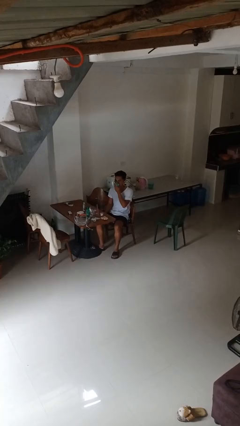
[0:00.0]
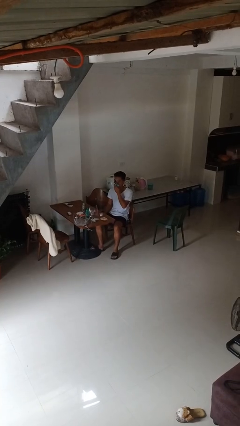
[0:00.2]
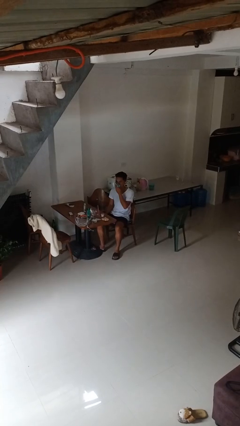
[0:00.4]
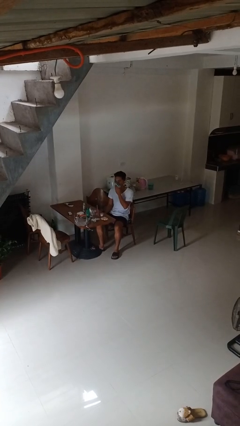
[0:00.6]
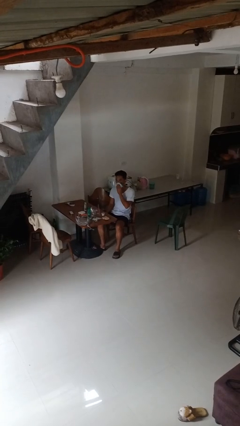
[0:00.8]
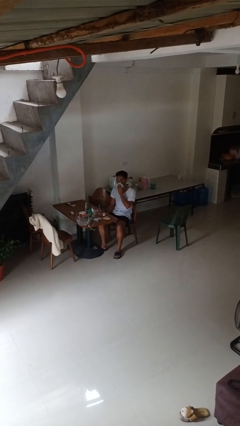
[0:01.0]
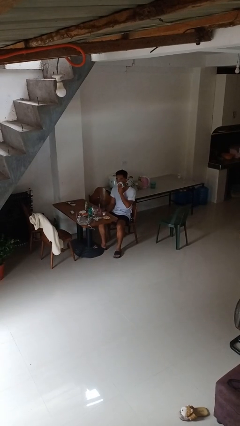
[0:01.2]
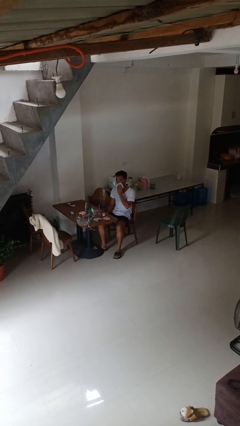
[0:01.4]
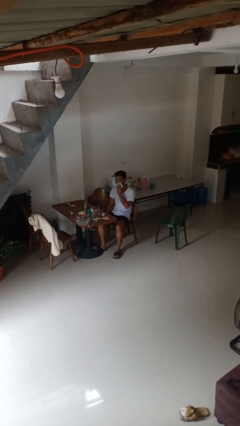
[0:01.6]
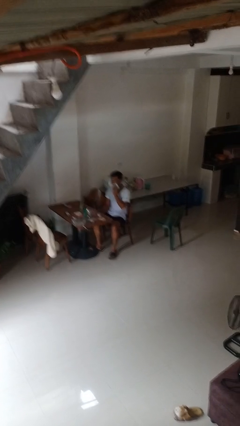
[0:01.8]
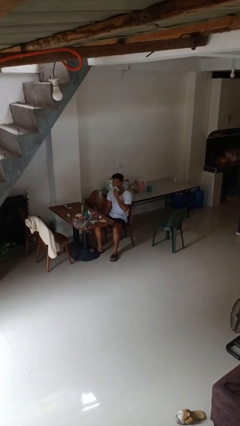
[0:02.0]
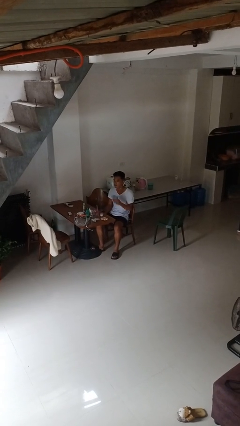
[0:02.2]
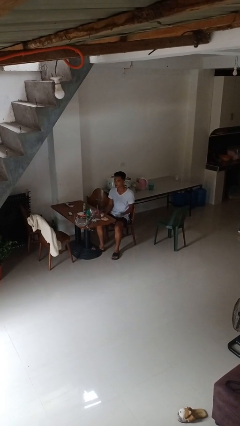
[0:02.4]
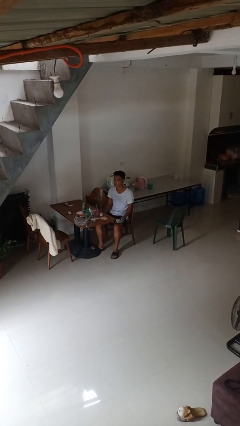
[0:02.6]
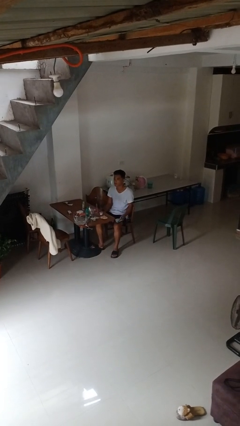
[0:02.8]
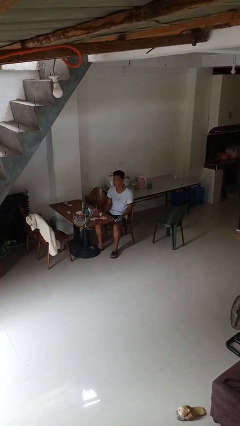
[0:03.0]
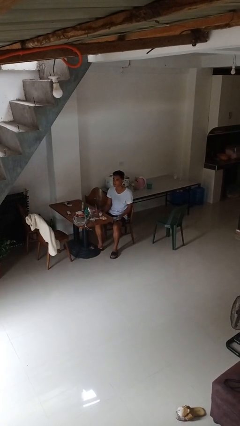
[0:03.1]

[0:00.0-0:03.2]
person wipes mouth with napkin

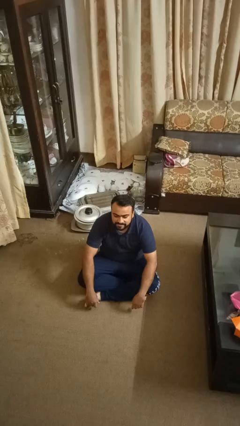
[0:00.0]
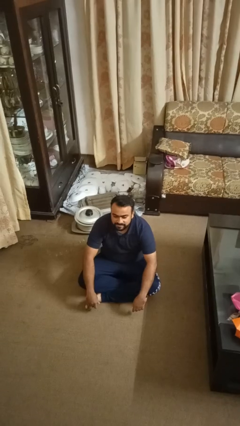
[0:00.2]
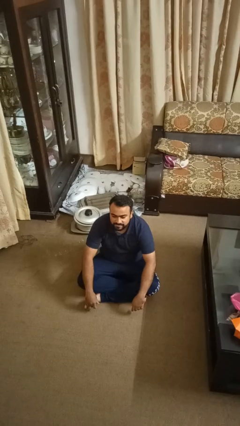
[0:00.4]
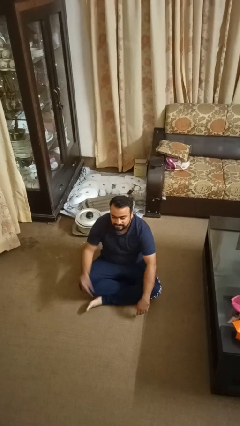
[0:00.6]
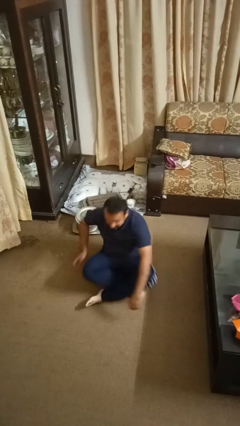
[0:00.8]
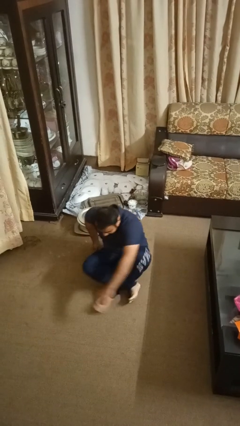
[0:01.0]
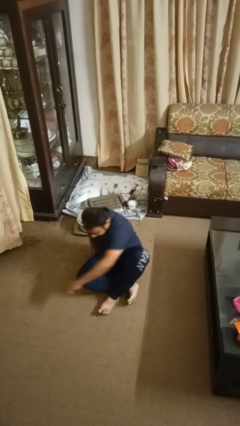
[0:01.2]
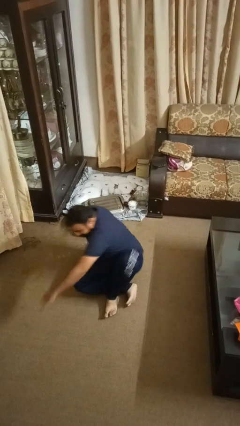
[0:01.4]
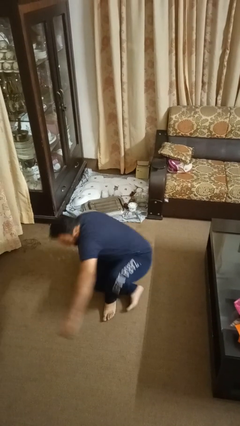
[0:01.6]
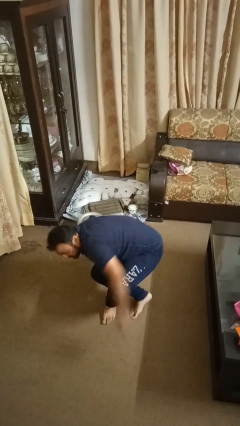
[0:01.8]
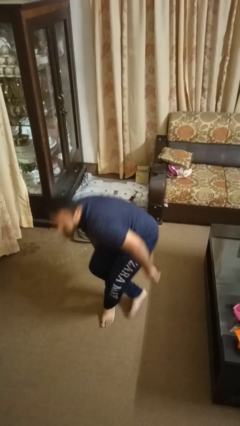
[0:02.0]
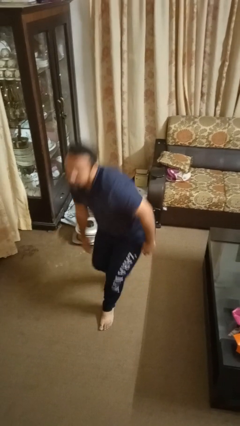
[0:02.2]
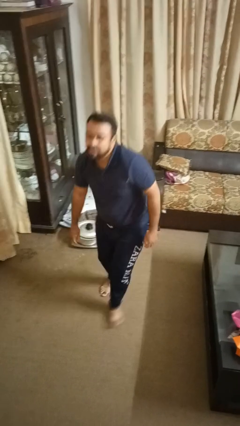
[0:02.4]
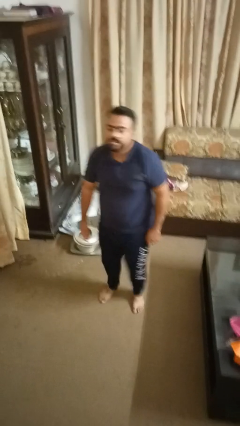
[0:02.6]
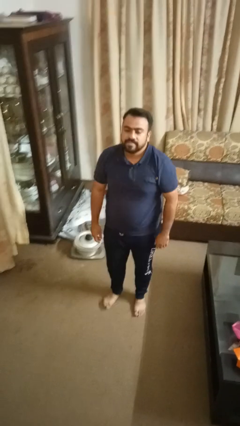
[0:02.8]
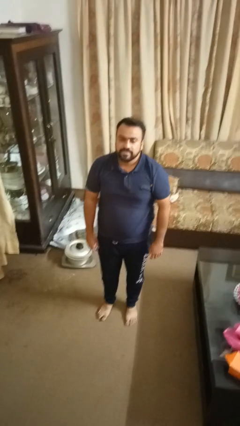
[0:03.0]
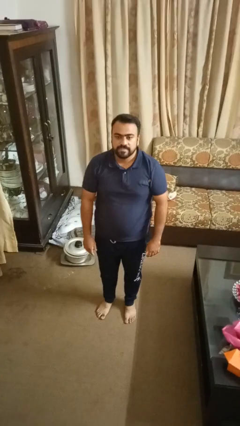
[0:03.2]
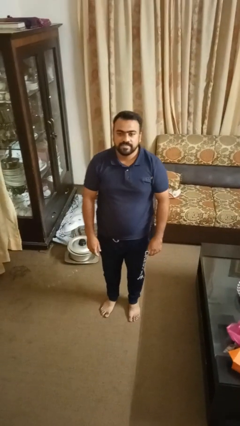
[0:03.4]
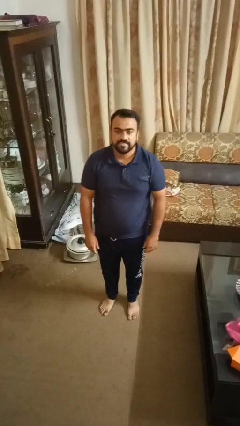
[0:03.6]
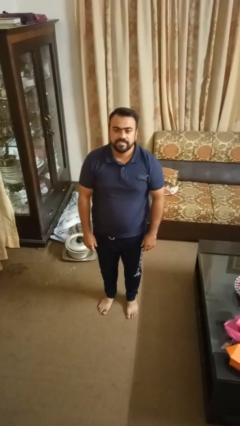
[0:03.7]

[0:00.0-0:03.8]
person stands up from floor

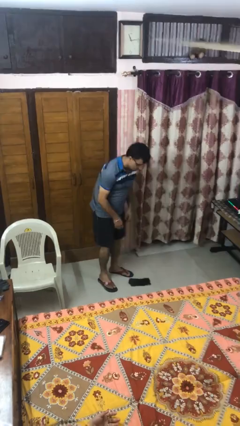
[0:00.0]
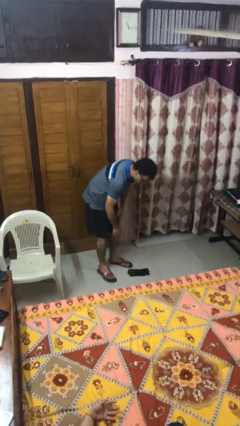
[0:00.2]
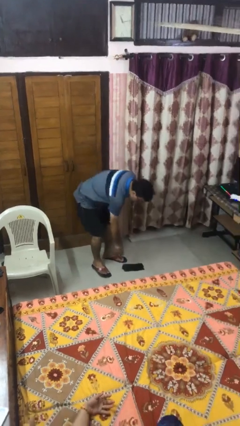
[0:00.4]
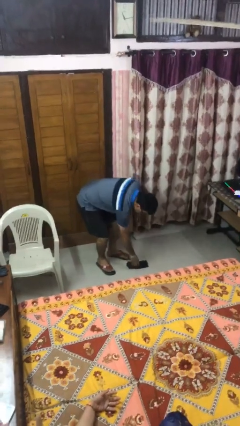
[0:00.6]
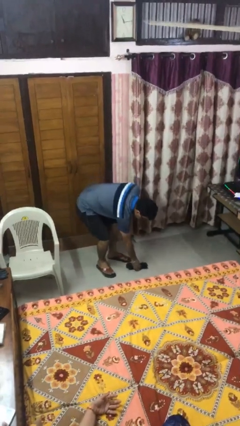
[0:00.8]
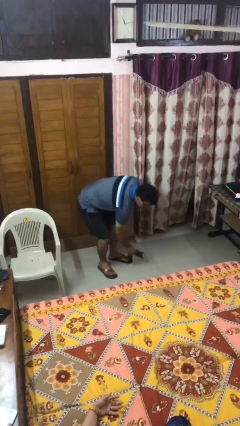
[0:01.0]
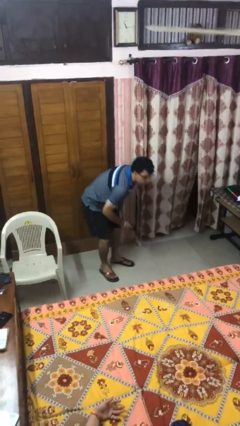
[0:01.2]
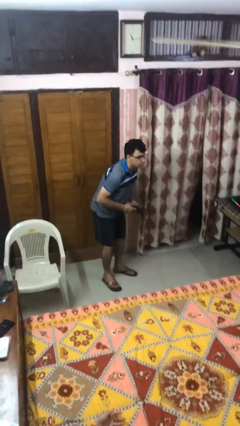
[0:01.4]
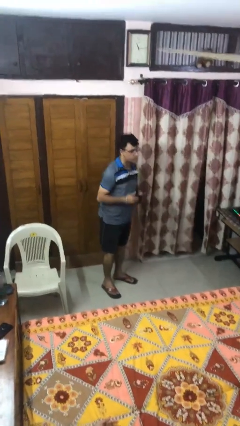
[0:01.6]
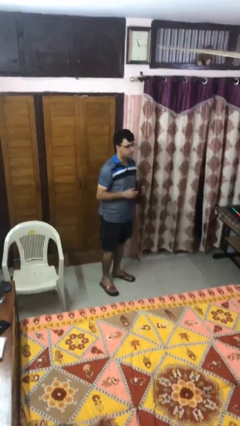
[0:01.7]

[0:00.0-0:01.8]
person picks up object from floor

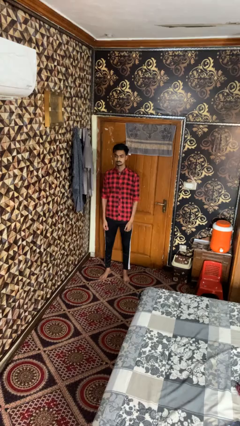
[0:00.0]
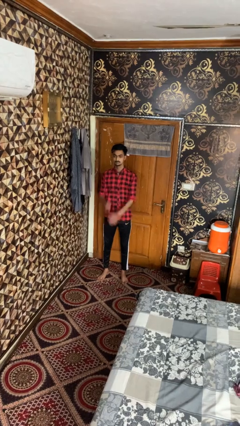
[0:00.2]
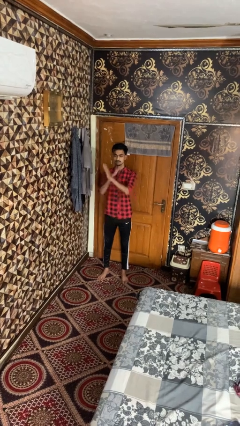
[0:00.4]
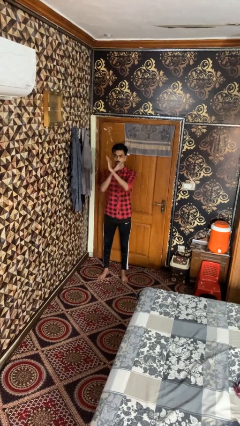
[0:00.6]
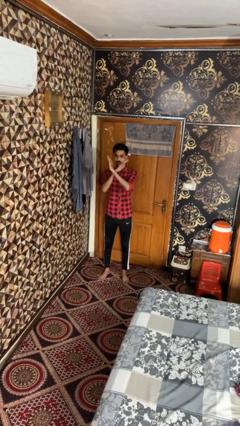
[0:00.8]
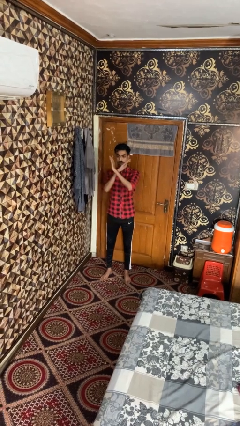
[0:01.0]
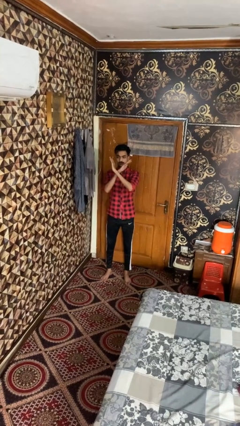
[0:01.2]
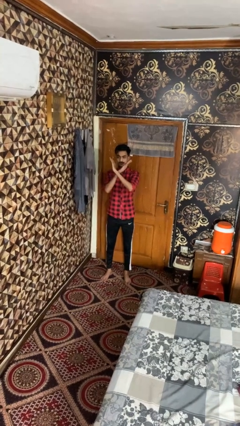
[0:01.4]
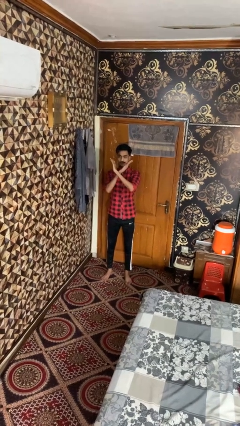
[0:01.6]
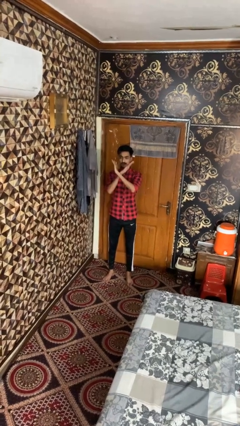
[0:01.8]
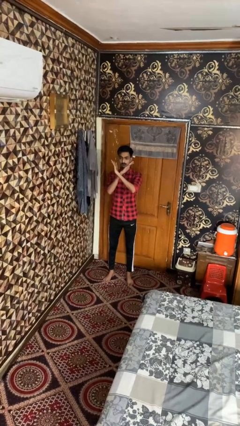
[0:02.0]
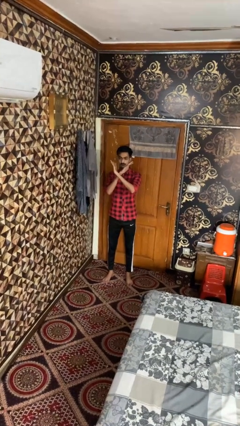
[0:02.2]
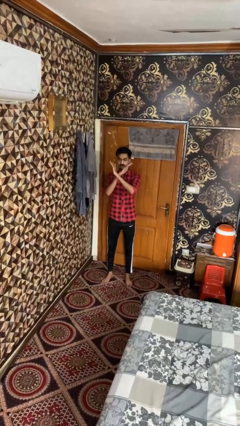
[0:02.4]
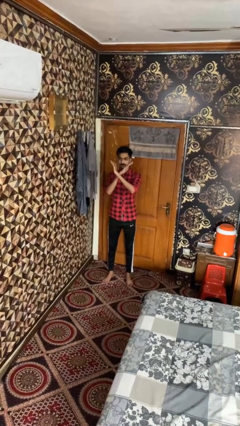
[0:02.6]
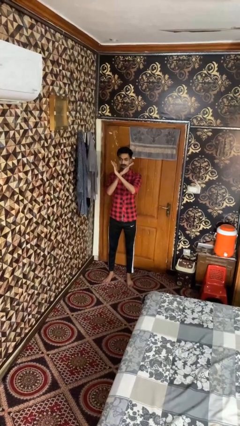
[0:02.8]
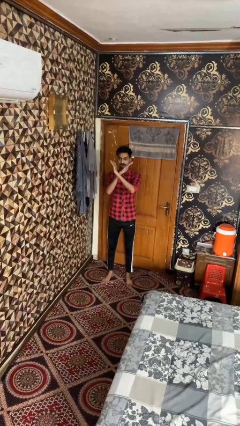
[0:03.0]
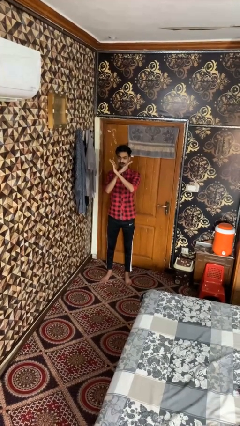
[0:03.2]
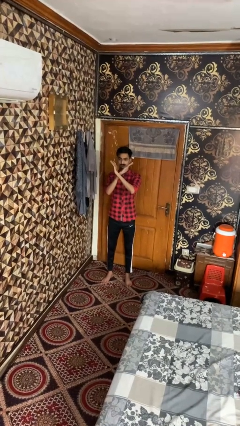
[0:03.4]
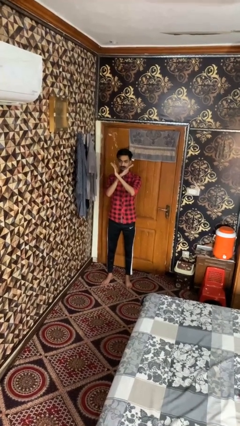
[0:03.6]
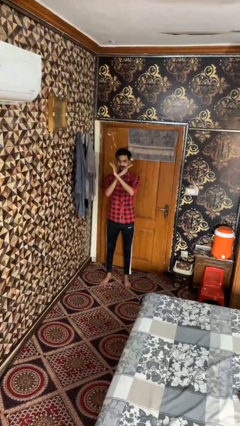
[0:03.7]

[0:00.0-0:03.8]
person gestures arms x

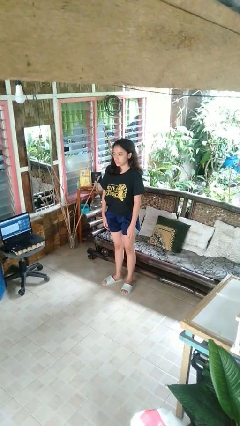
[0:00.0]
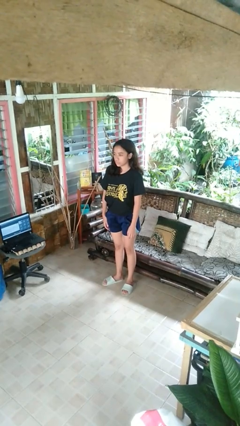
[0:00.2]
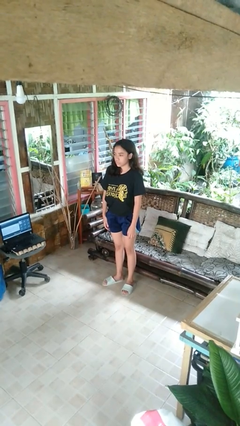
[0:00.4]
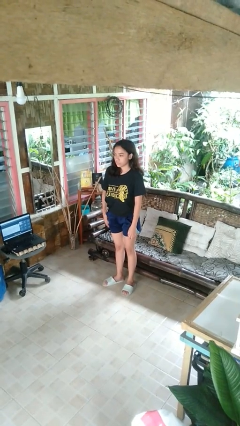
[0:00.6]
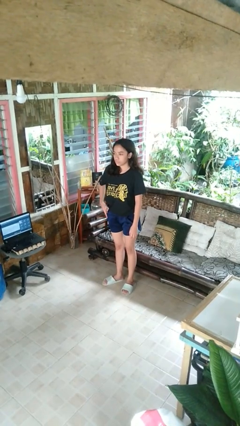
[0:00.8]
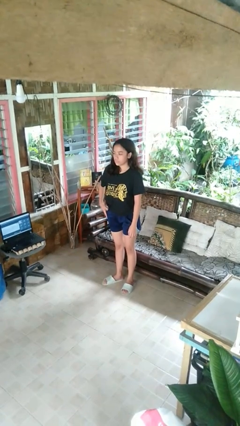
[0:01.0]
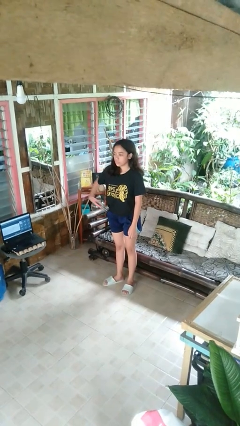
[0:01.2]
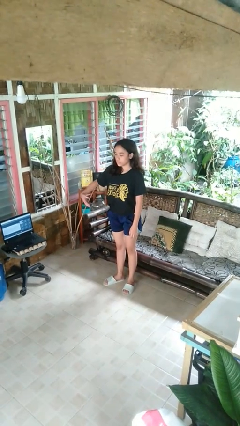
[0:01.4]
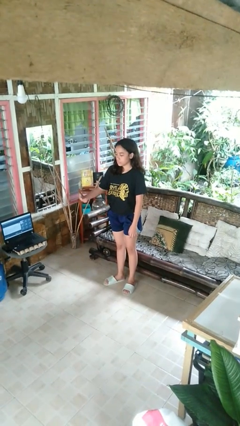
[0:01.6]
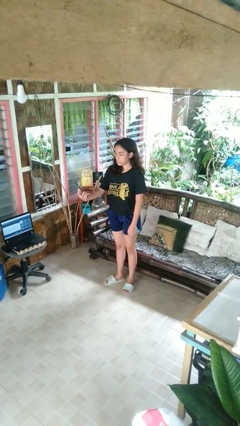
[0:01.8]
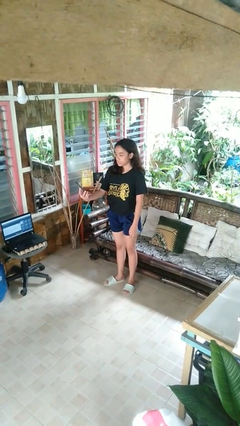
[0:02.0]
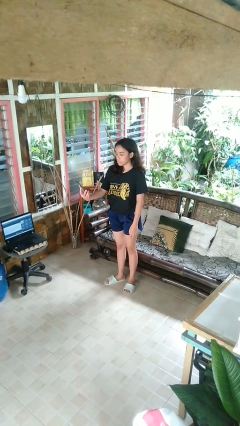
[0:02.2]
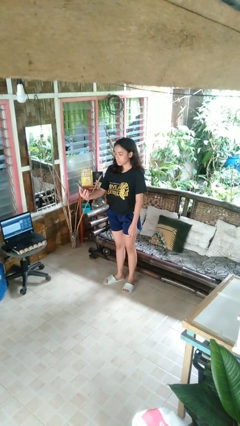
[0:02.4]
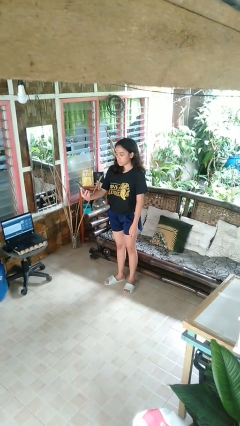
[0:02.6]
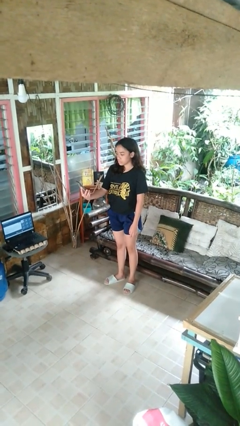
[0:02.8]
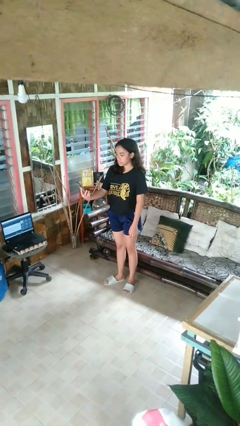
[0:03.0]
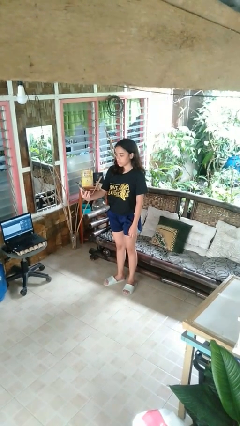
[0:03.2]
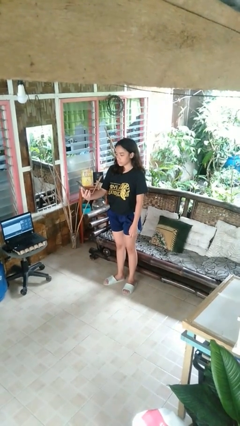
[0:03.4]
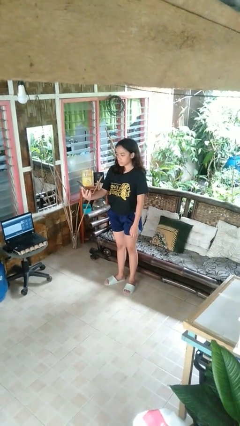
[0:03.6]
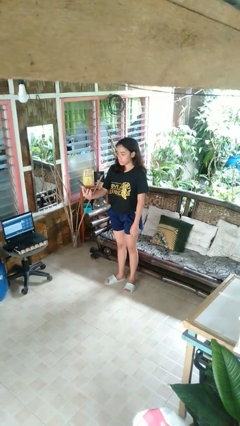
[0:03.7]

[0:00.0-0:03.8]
person takes phone from pocket

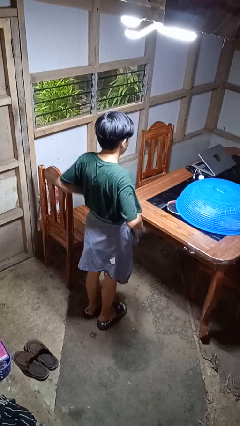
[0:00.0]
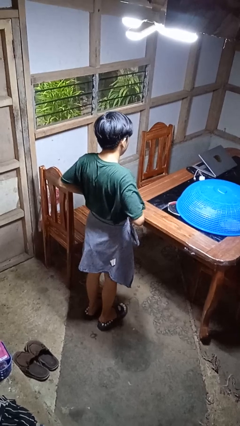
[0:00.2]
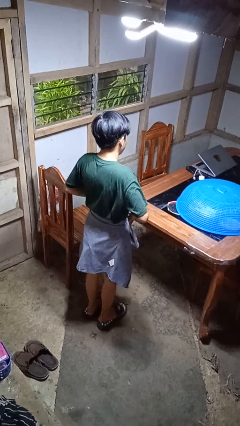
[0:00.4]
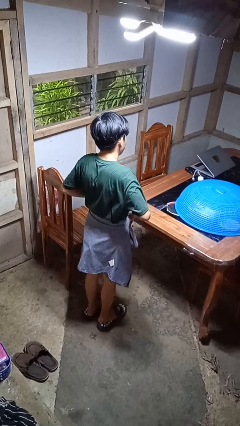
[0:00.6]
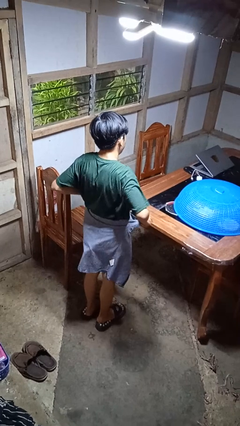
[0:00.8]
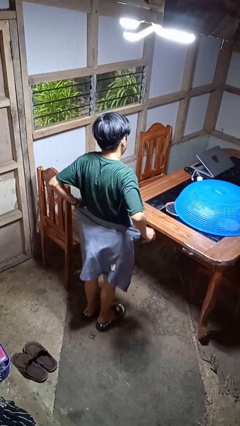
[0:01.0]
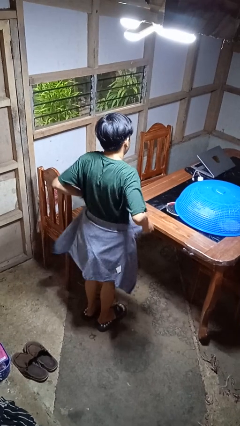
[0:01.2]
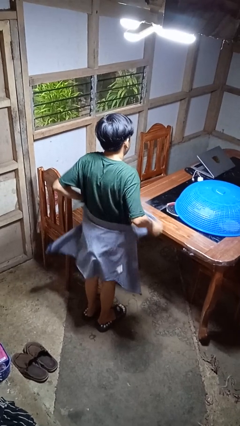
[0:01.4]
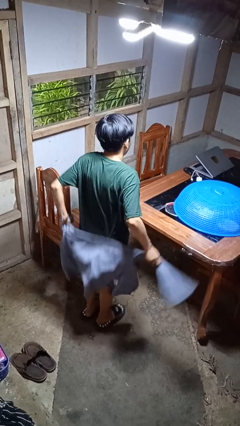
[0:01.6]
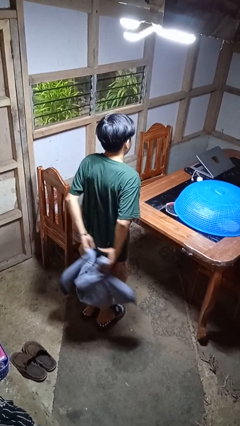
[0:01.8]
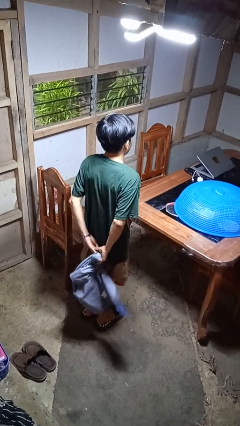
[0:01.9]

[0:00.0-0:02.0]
person unties jacket around waist
